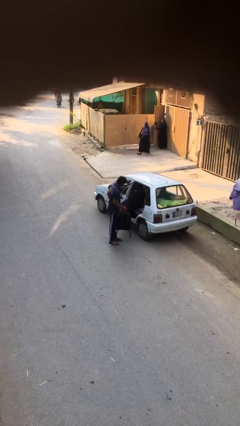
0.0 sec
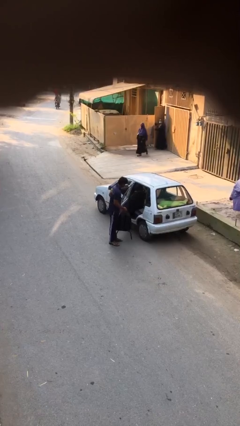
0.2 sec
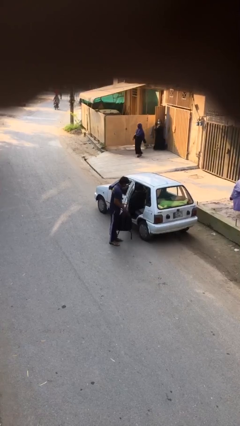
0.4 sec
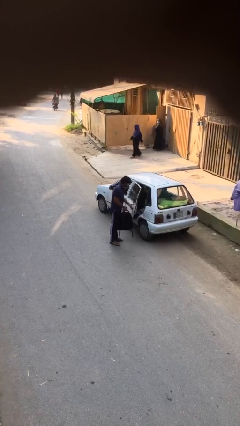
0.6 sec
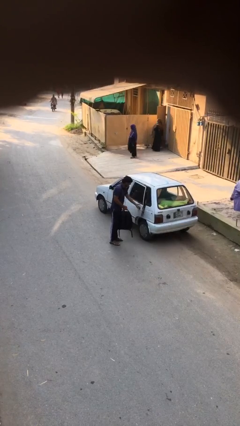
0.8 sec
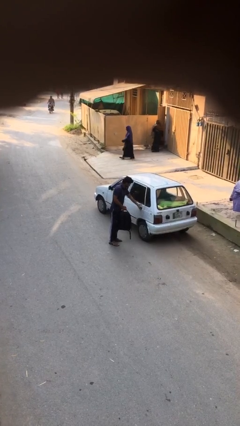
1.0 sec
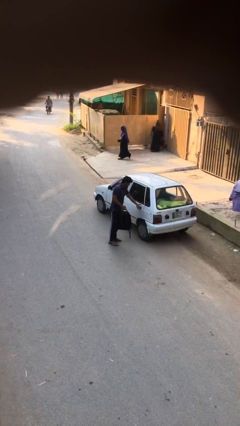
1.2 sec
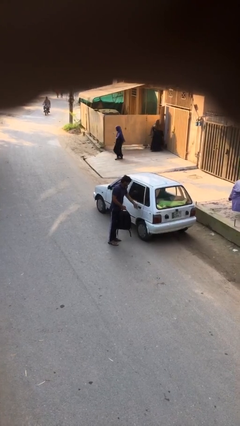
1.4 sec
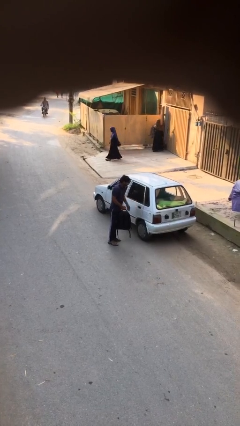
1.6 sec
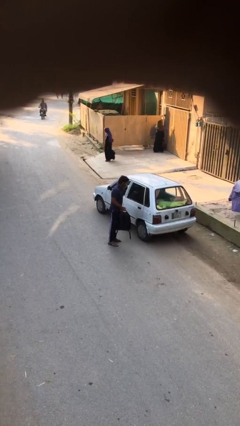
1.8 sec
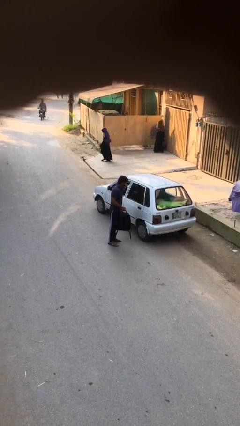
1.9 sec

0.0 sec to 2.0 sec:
person closes car door

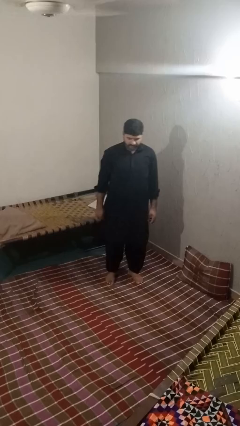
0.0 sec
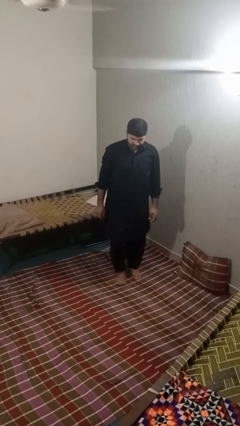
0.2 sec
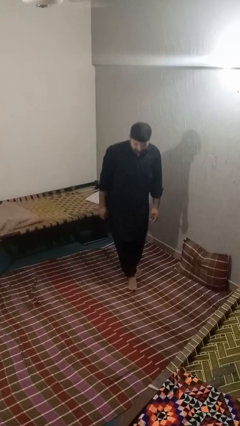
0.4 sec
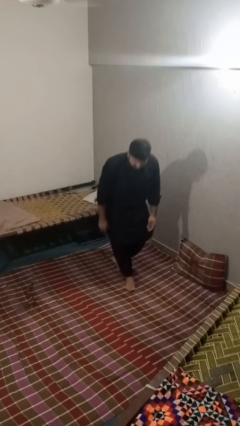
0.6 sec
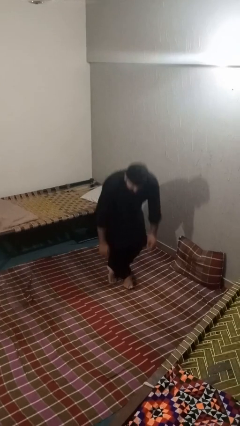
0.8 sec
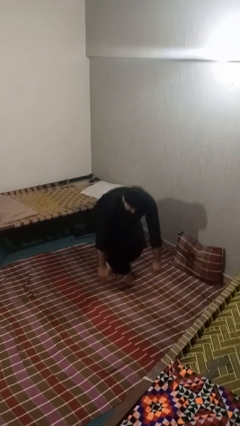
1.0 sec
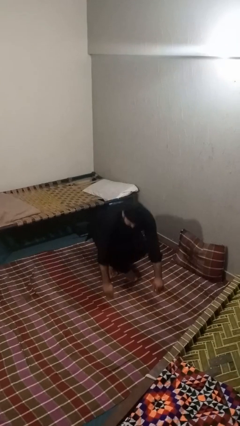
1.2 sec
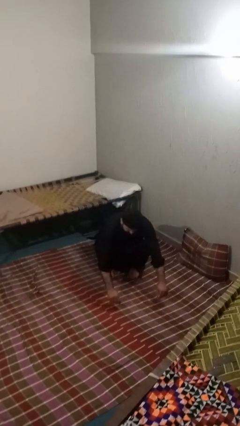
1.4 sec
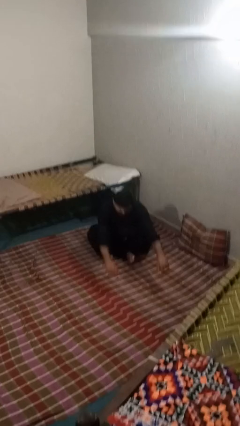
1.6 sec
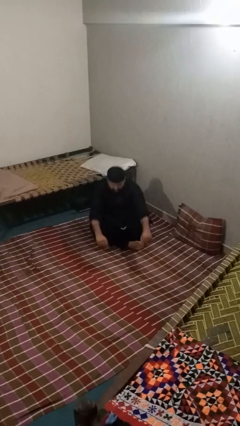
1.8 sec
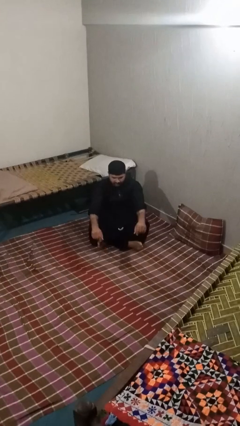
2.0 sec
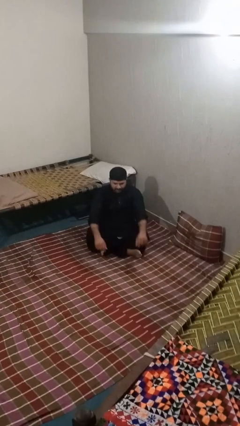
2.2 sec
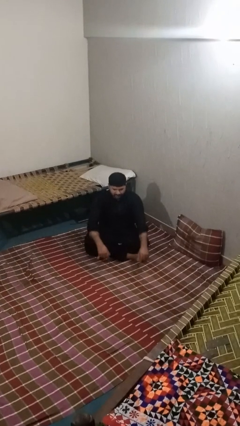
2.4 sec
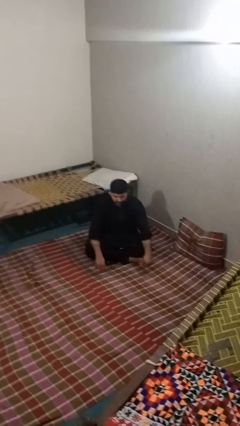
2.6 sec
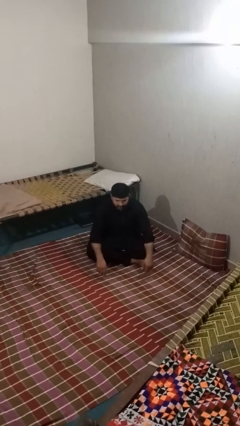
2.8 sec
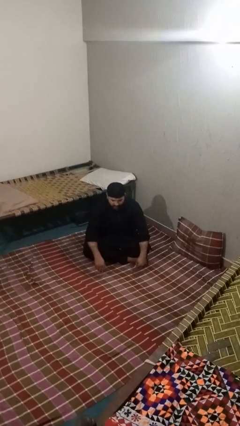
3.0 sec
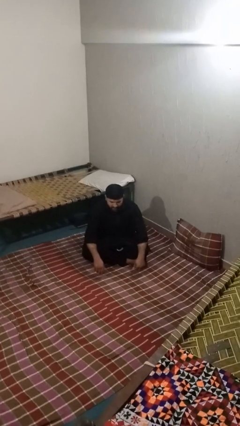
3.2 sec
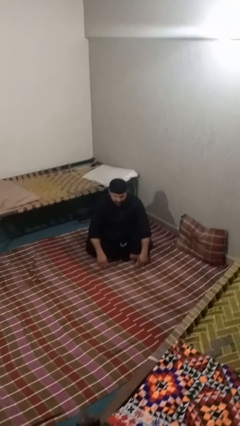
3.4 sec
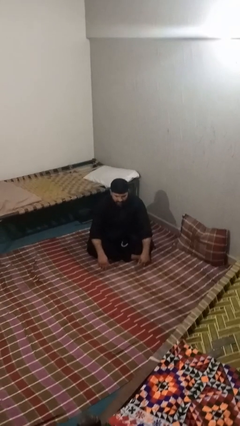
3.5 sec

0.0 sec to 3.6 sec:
person sits crisscross

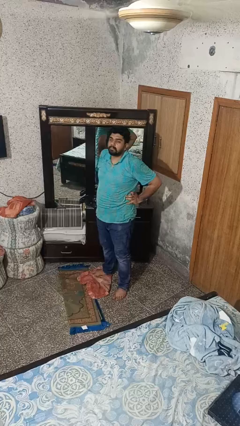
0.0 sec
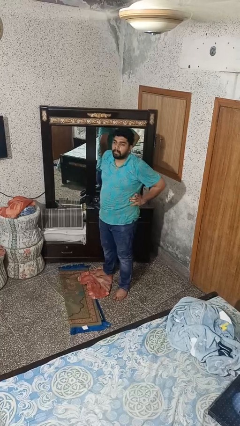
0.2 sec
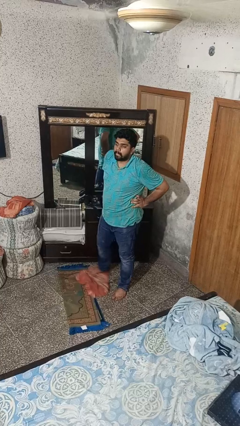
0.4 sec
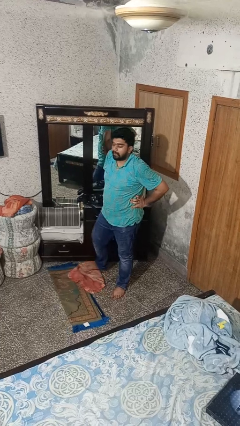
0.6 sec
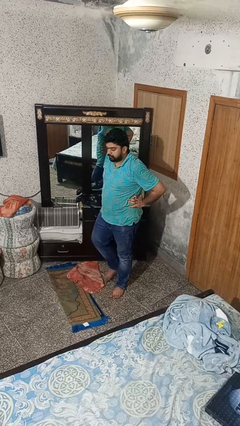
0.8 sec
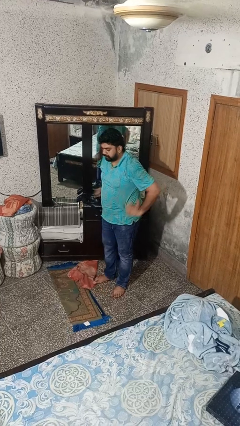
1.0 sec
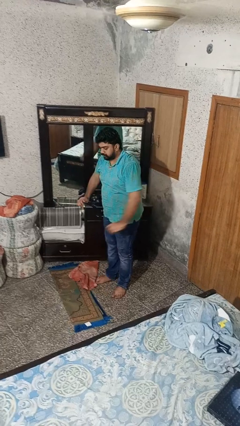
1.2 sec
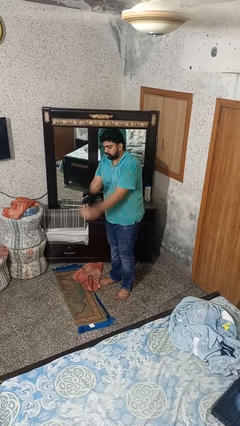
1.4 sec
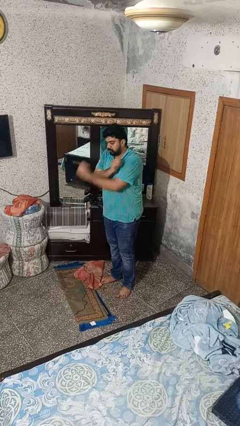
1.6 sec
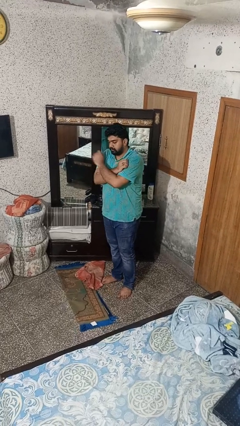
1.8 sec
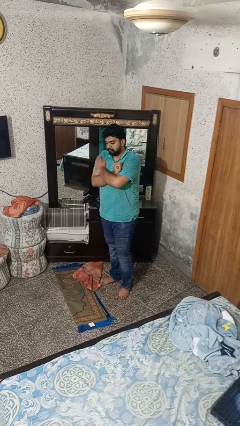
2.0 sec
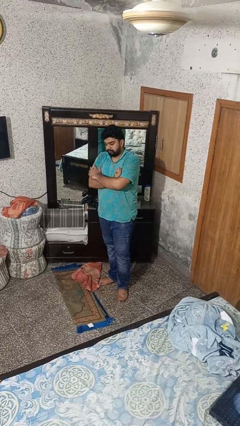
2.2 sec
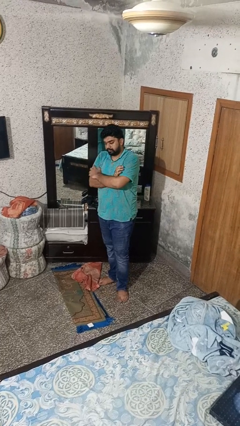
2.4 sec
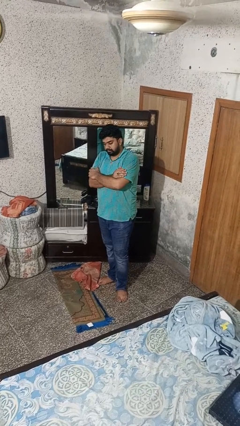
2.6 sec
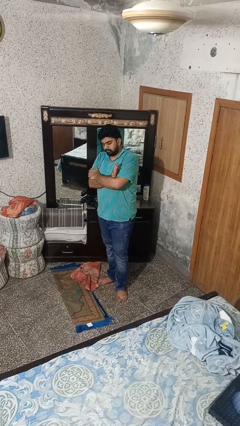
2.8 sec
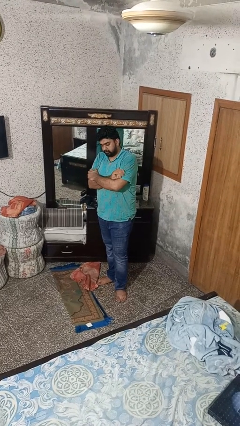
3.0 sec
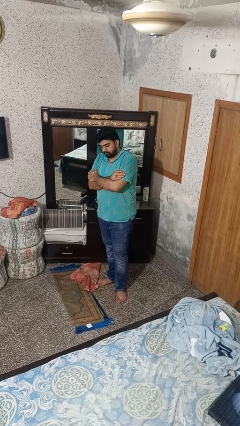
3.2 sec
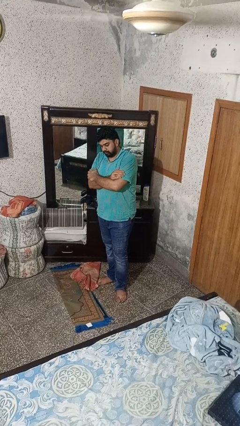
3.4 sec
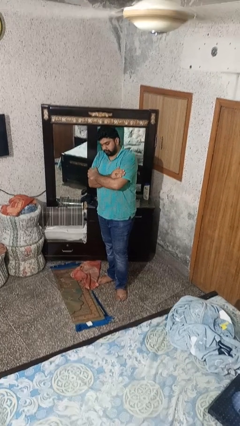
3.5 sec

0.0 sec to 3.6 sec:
person crosses arms

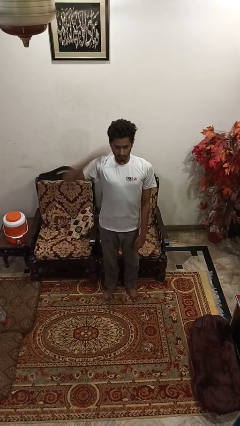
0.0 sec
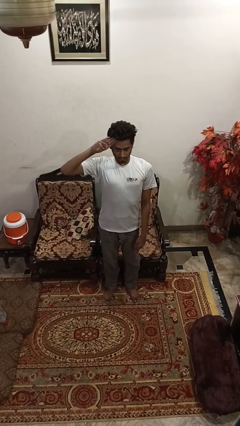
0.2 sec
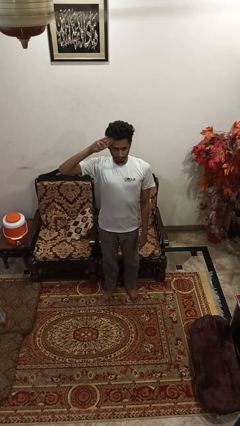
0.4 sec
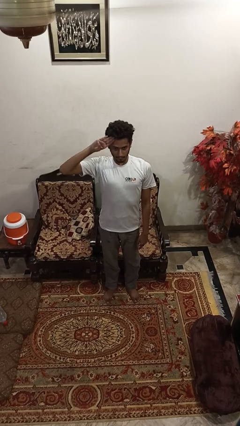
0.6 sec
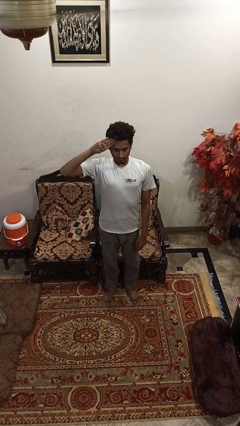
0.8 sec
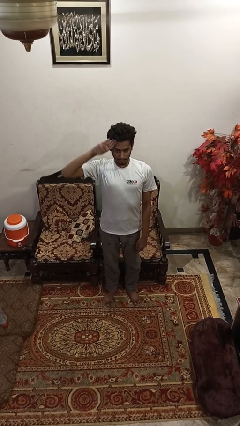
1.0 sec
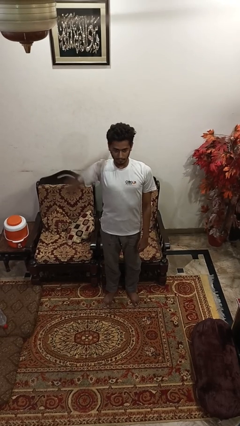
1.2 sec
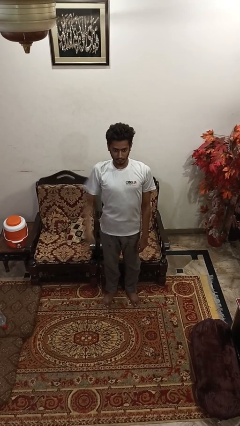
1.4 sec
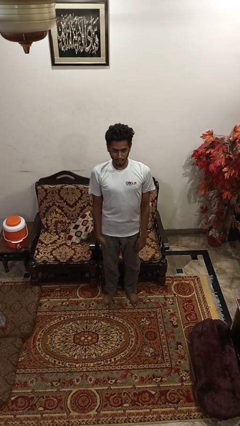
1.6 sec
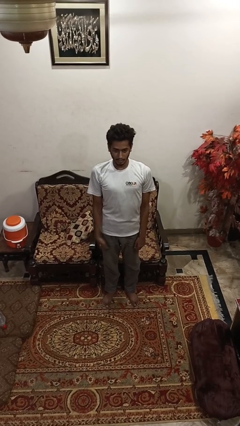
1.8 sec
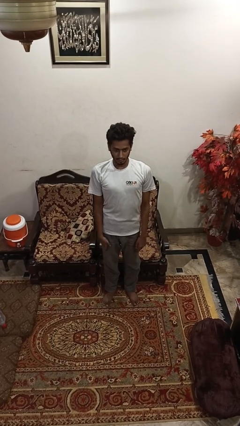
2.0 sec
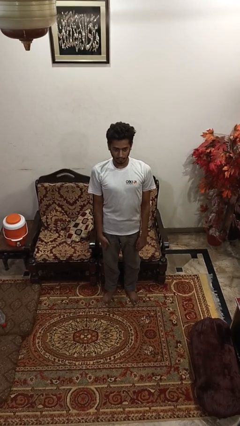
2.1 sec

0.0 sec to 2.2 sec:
person salutes

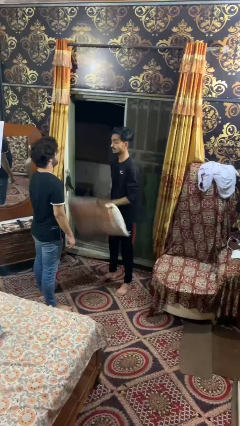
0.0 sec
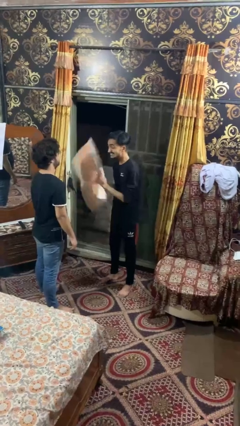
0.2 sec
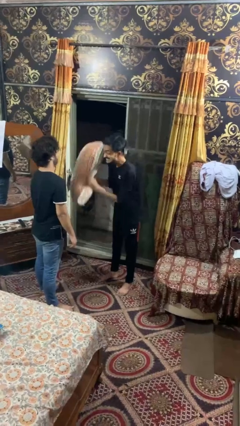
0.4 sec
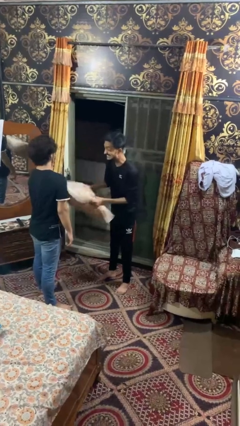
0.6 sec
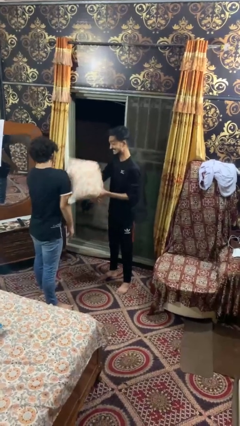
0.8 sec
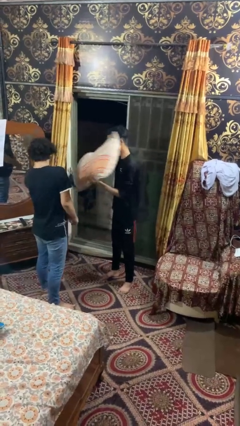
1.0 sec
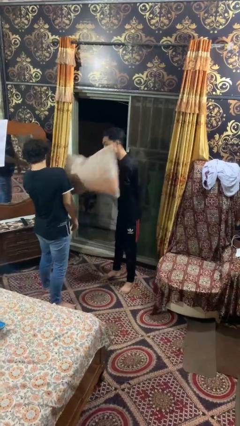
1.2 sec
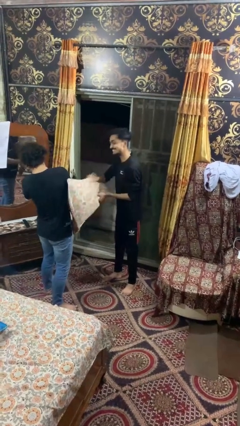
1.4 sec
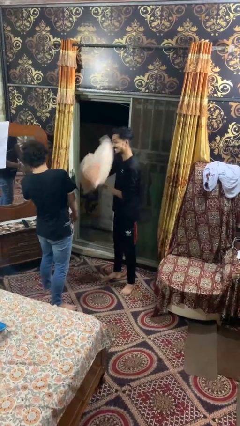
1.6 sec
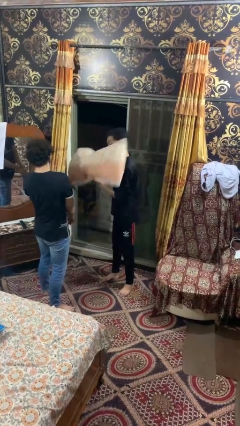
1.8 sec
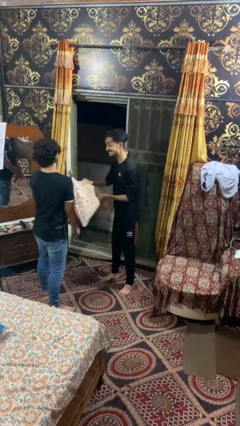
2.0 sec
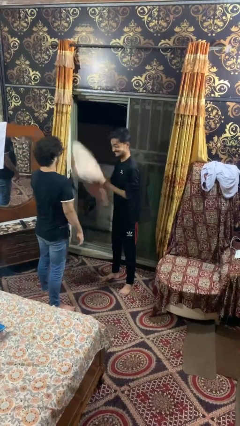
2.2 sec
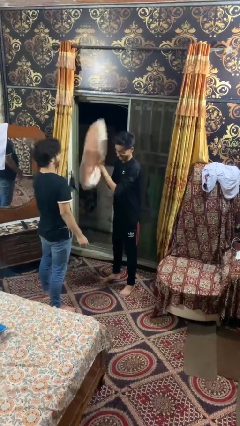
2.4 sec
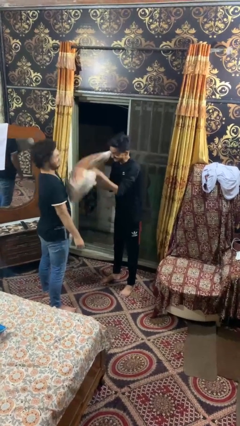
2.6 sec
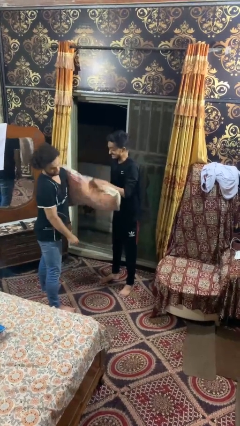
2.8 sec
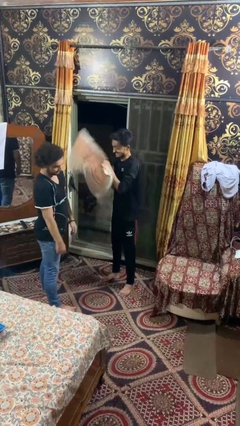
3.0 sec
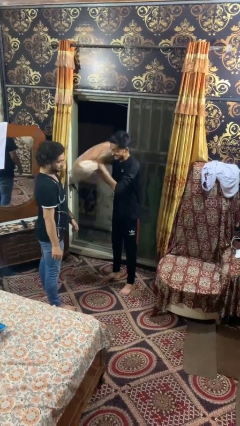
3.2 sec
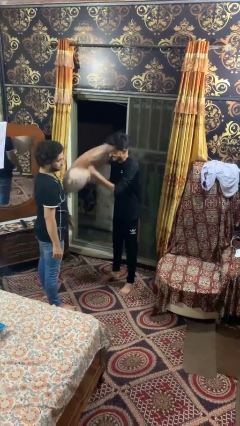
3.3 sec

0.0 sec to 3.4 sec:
person hits person with pillow

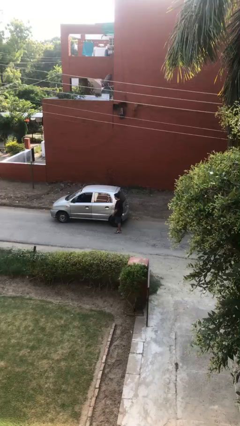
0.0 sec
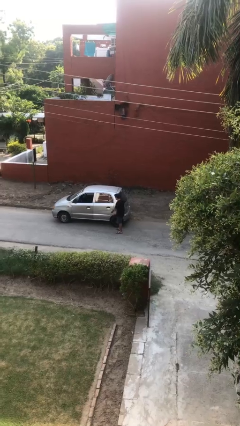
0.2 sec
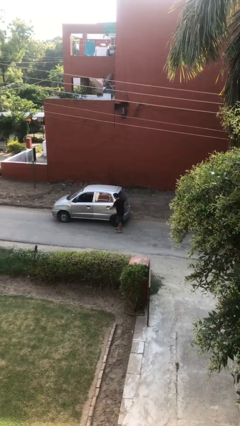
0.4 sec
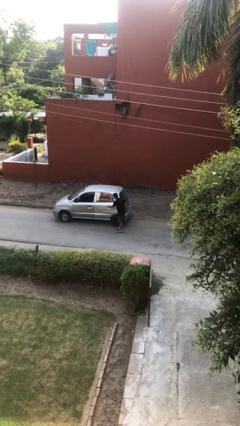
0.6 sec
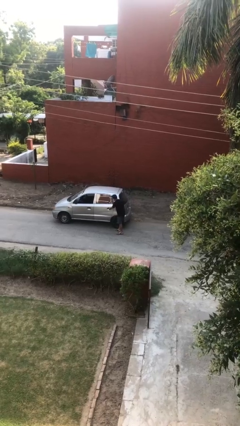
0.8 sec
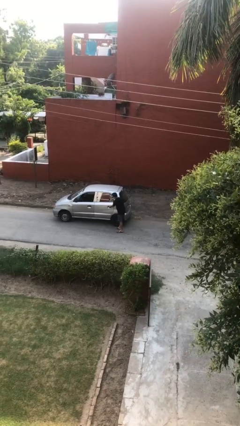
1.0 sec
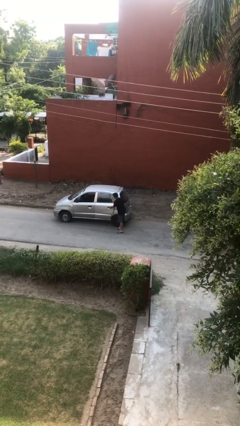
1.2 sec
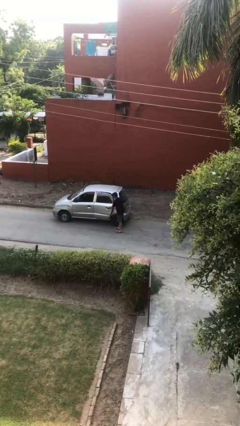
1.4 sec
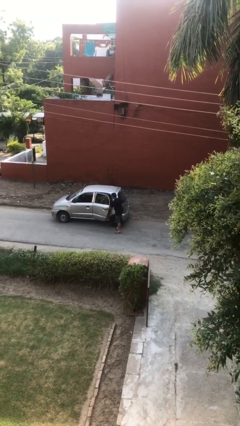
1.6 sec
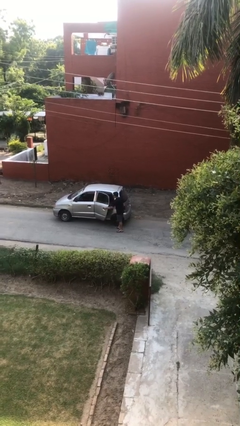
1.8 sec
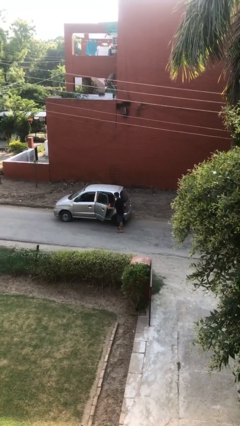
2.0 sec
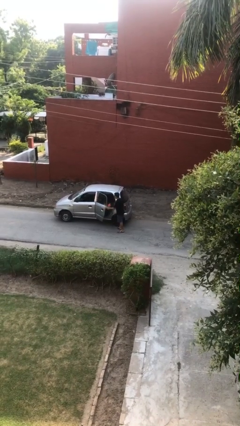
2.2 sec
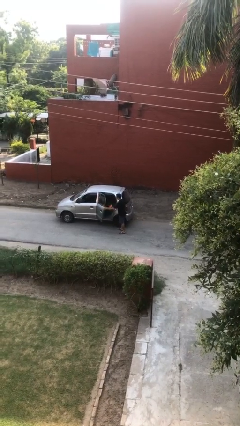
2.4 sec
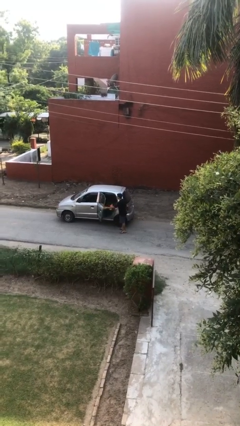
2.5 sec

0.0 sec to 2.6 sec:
person opens car door

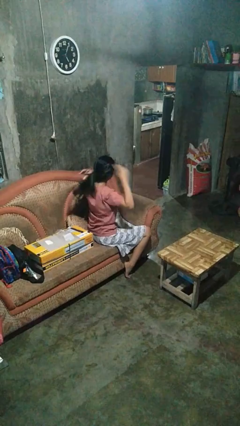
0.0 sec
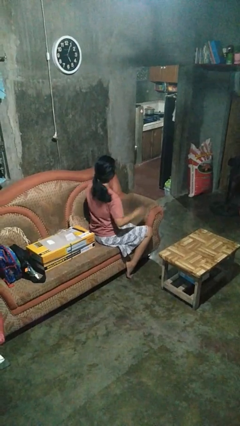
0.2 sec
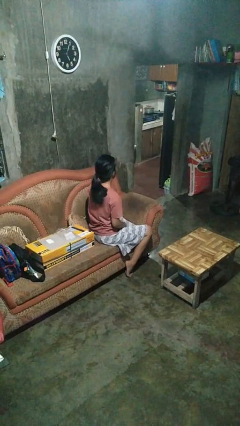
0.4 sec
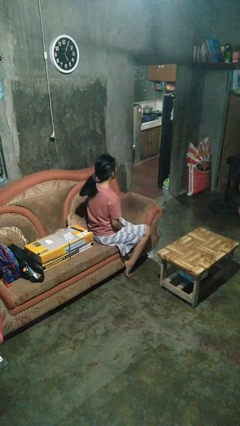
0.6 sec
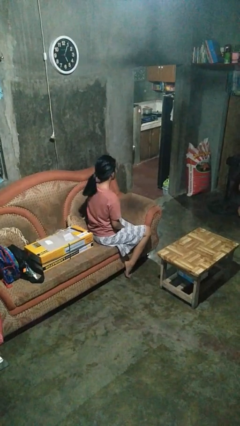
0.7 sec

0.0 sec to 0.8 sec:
person takes off hairtie
